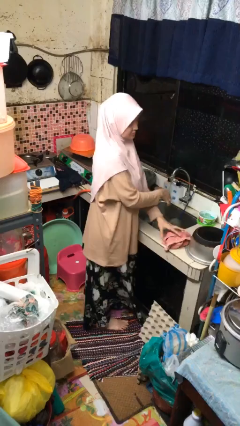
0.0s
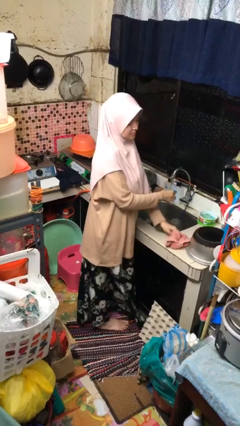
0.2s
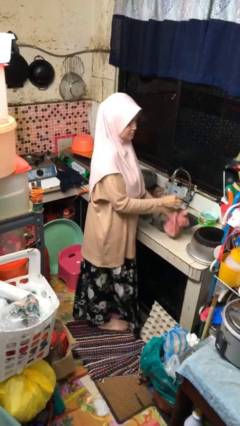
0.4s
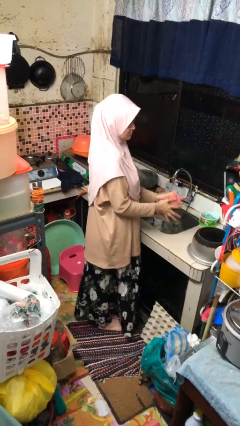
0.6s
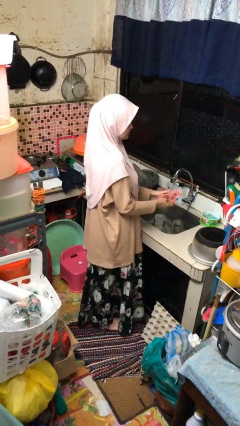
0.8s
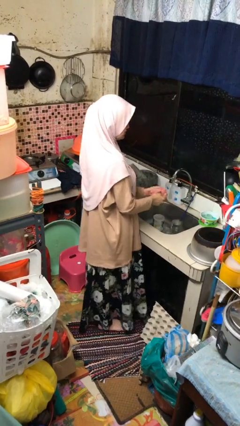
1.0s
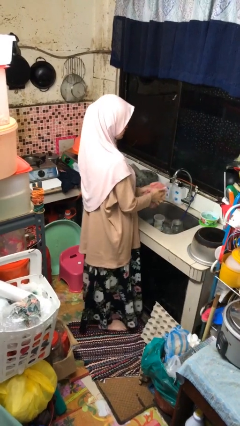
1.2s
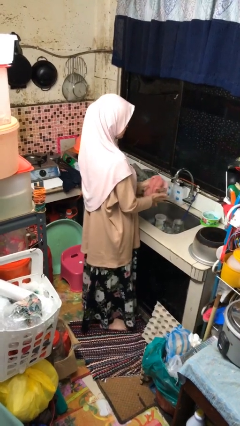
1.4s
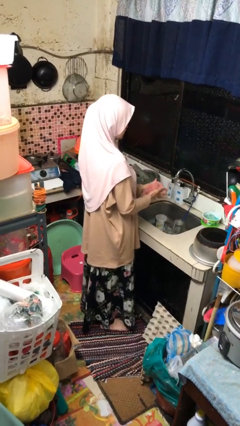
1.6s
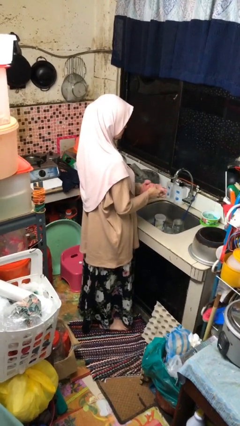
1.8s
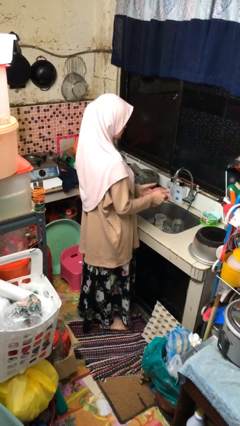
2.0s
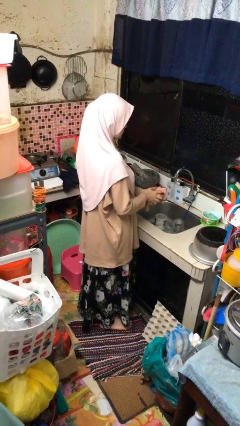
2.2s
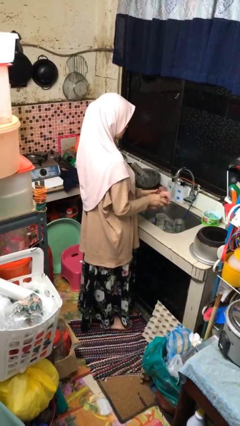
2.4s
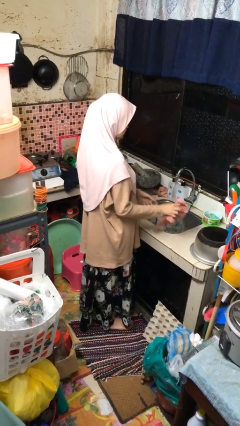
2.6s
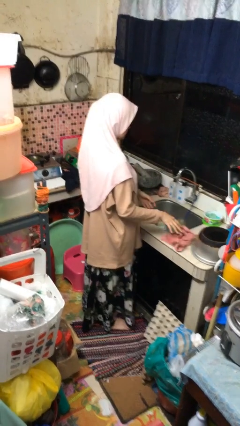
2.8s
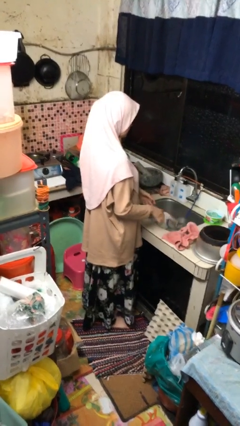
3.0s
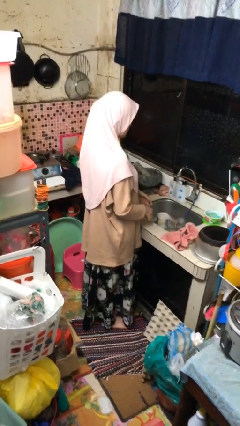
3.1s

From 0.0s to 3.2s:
person dries hands with towel

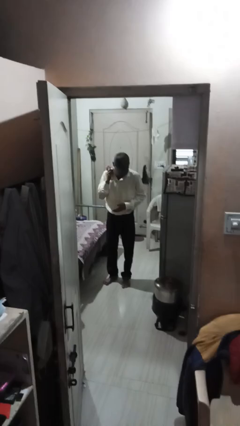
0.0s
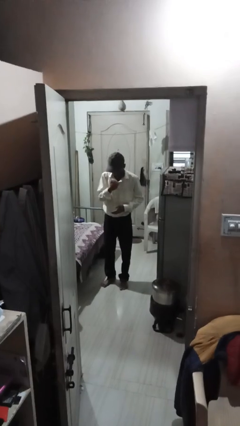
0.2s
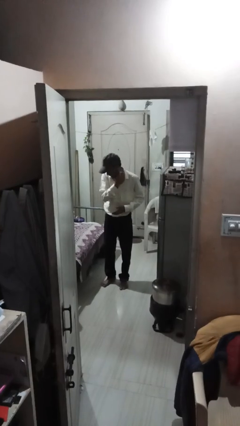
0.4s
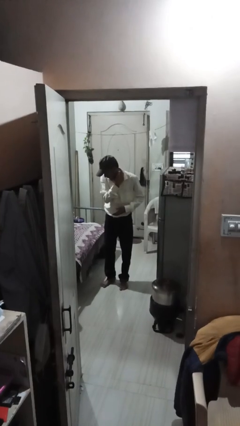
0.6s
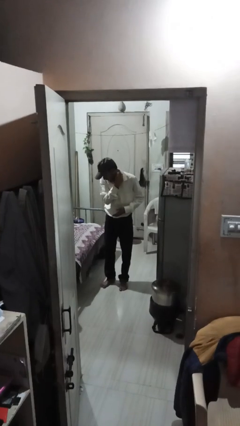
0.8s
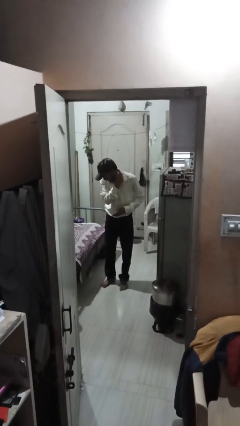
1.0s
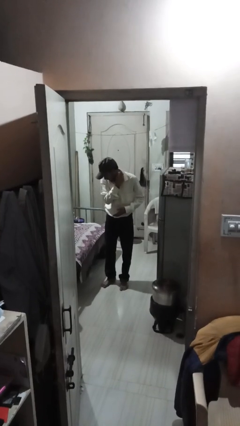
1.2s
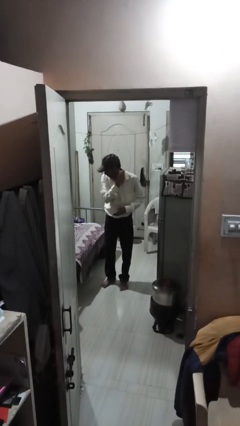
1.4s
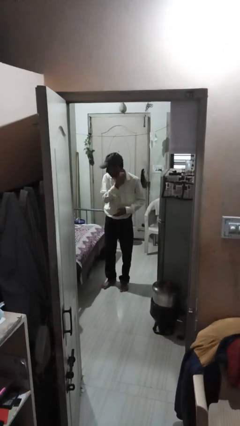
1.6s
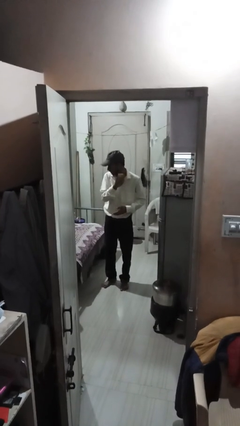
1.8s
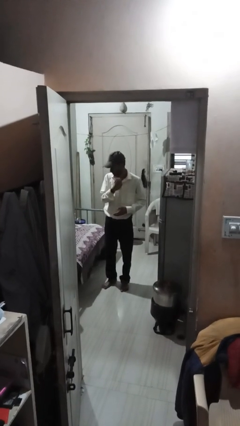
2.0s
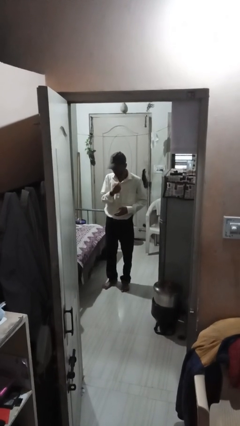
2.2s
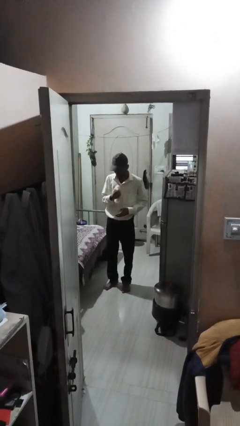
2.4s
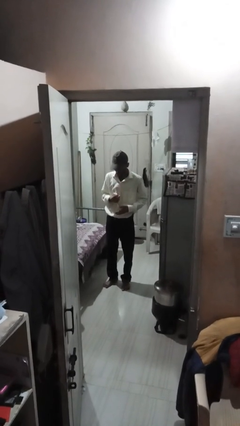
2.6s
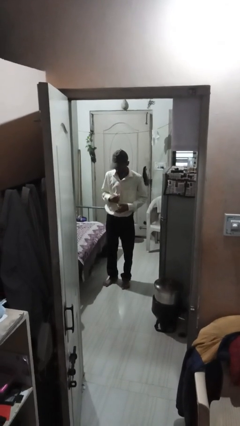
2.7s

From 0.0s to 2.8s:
person applies deodorant

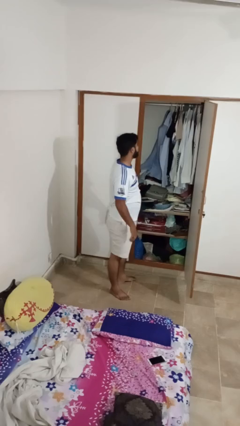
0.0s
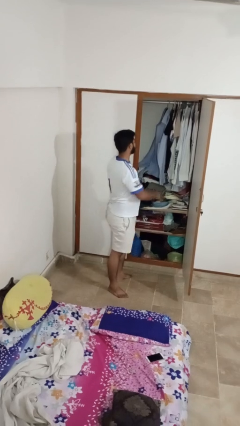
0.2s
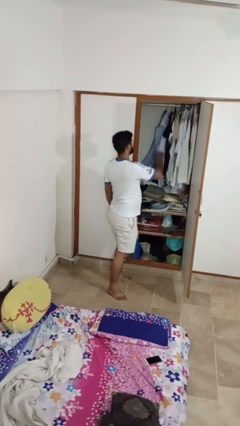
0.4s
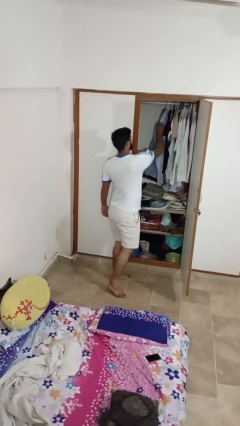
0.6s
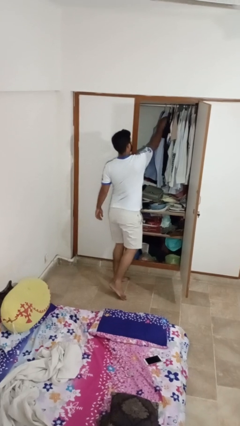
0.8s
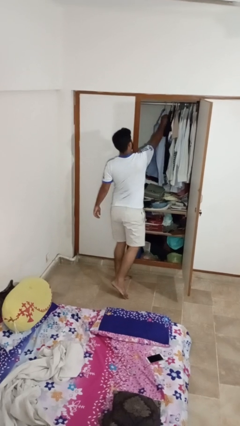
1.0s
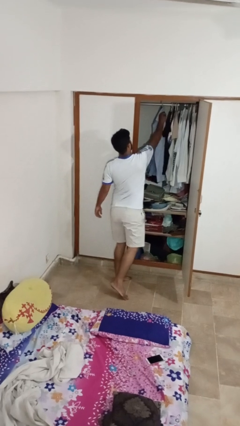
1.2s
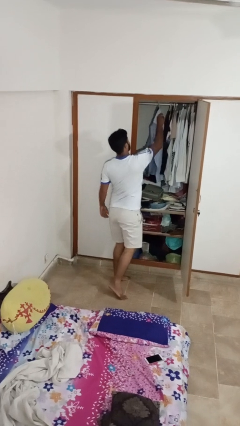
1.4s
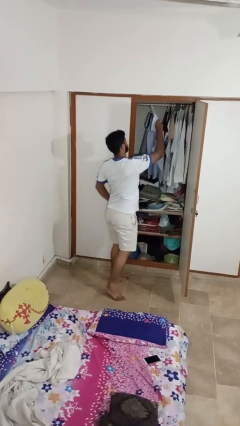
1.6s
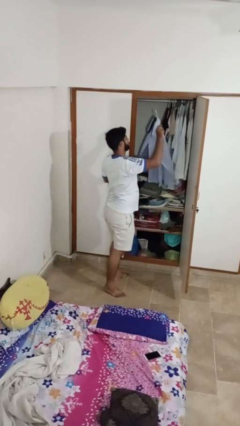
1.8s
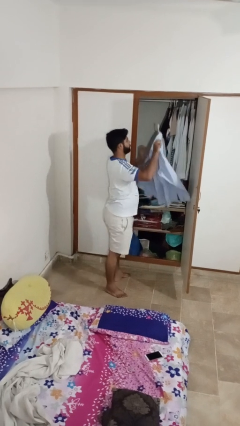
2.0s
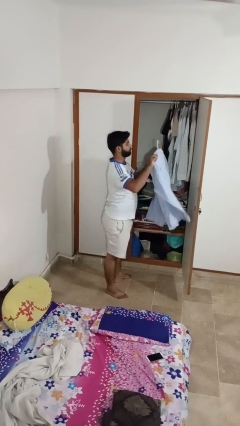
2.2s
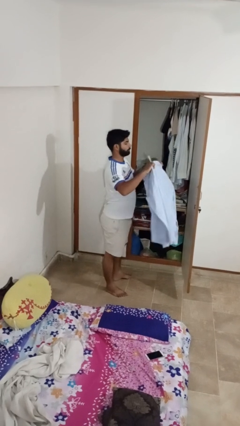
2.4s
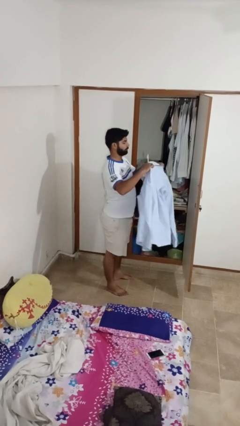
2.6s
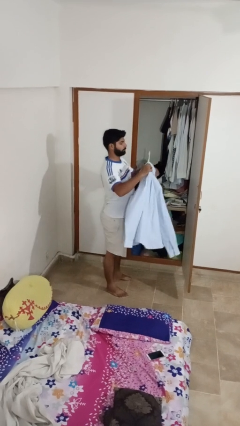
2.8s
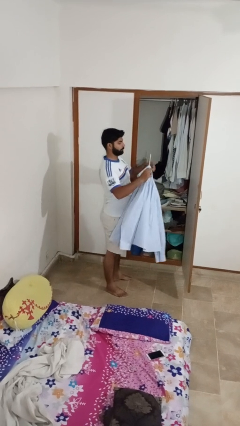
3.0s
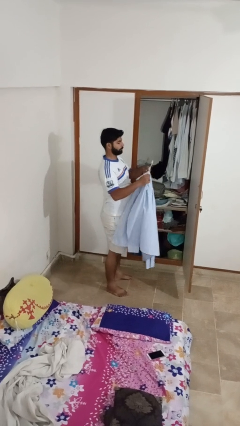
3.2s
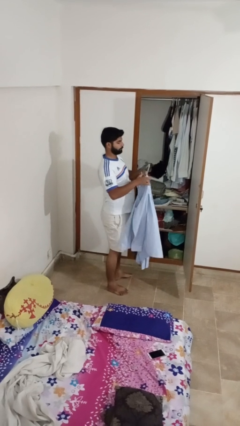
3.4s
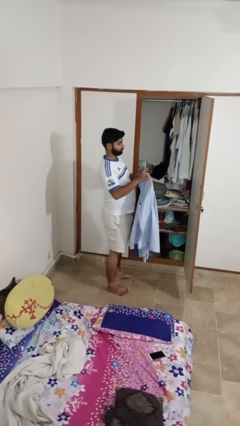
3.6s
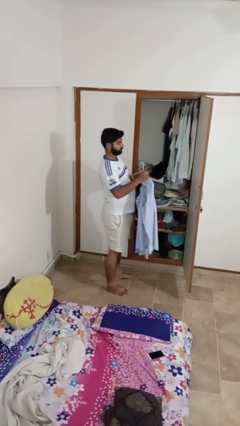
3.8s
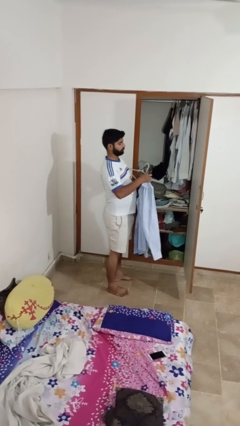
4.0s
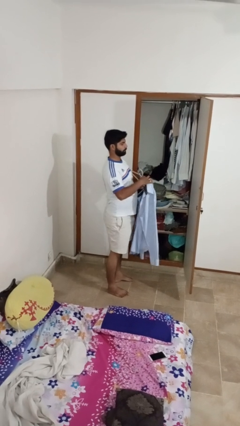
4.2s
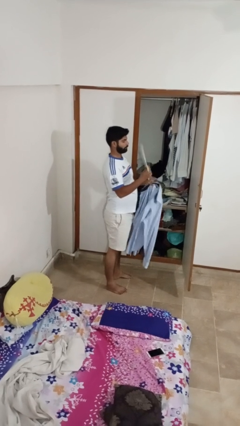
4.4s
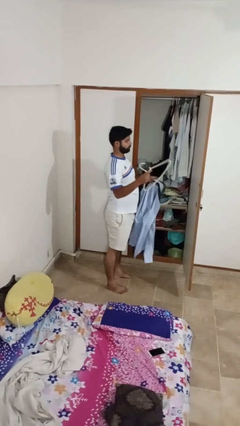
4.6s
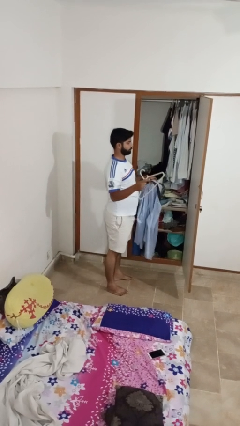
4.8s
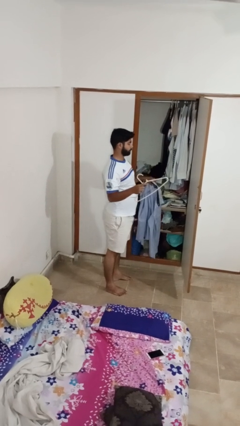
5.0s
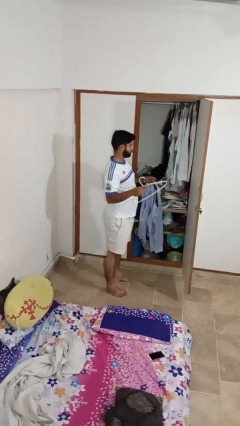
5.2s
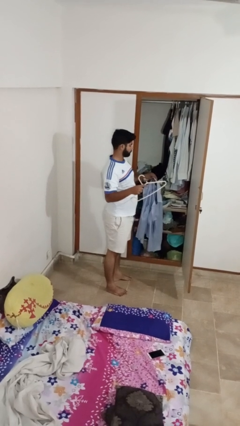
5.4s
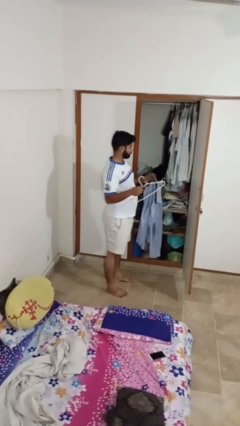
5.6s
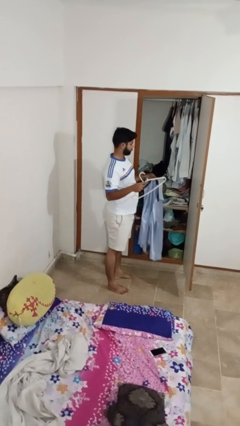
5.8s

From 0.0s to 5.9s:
person takes clothes from closet

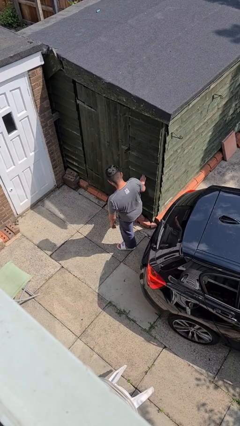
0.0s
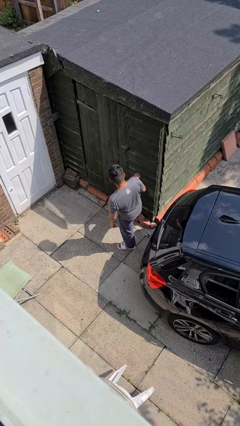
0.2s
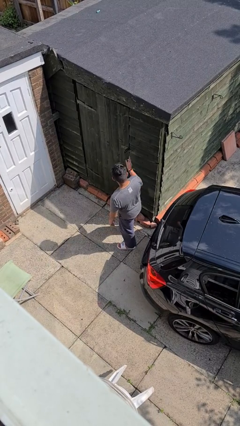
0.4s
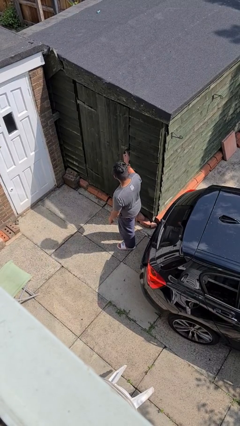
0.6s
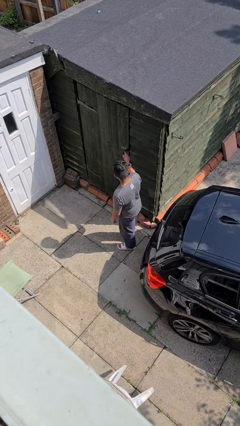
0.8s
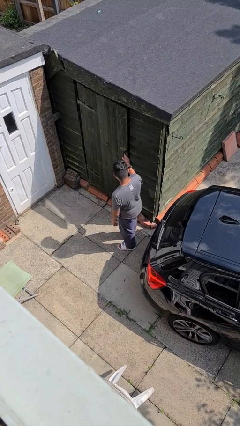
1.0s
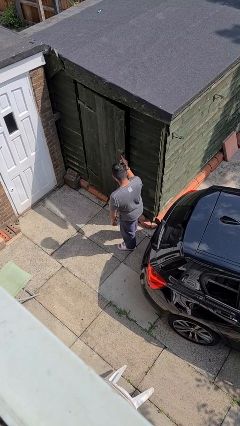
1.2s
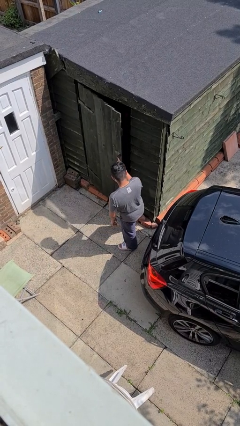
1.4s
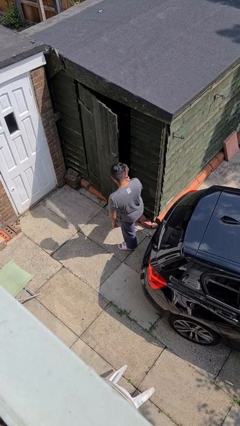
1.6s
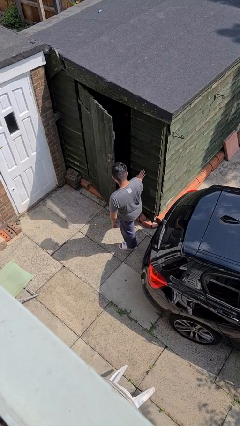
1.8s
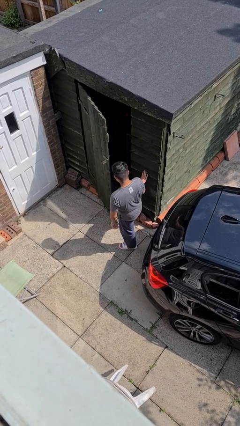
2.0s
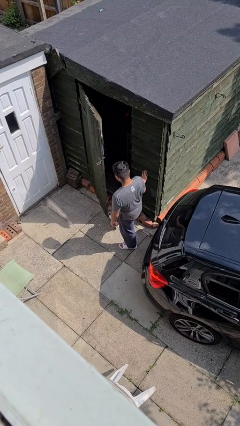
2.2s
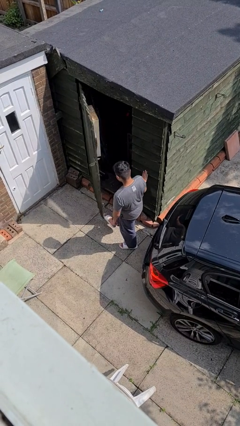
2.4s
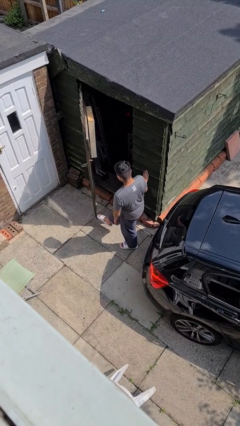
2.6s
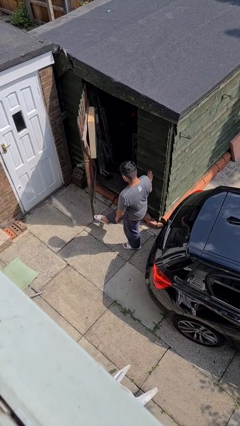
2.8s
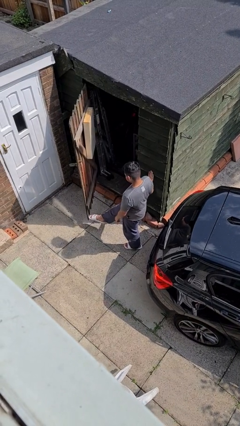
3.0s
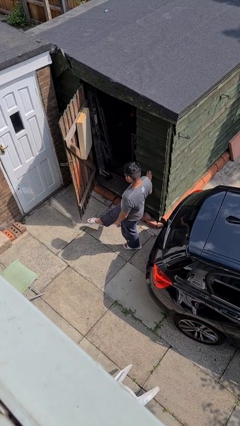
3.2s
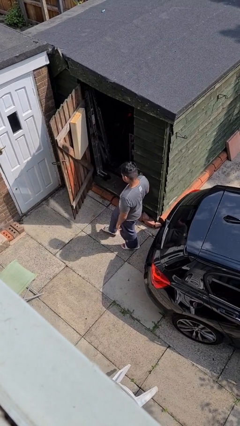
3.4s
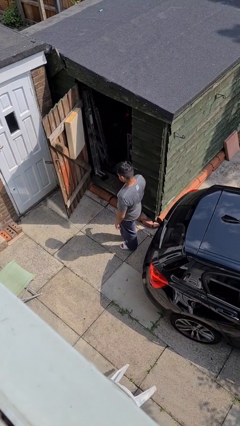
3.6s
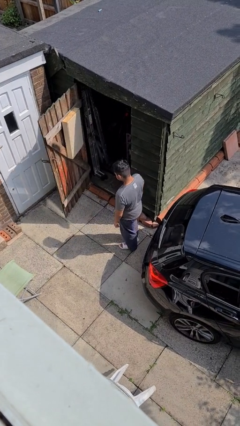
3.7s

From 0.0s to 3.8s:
person opens facility door

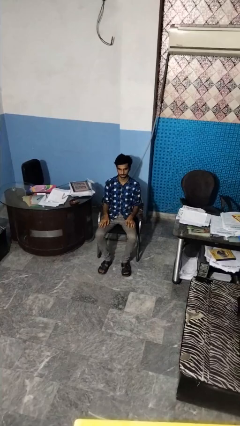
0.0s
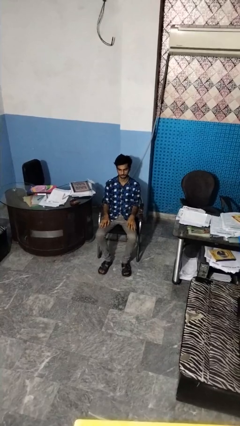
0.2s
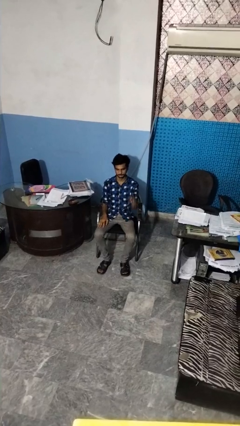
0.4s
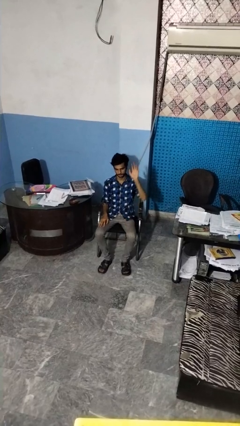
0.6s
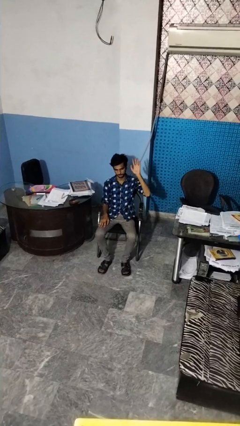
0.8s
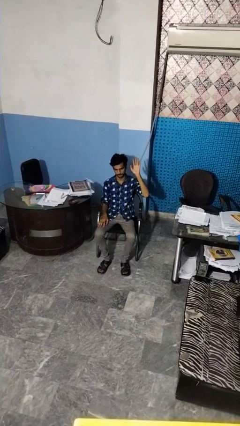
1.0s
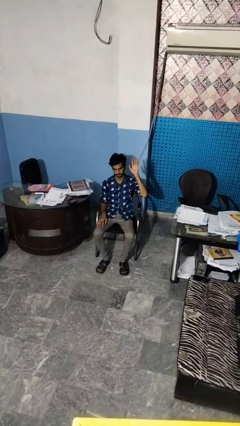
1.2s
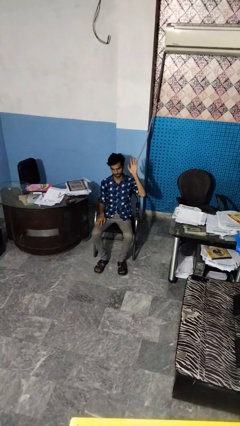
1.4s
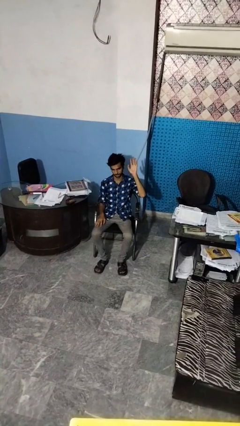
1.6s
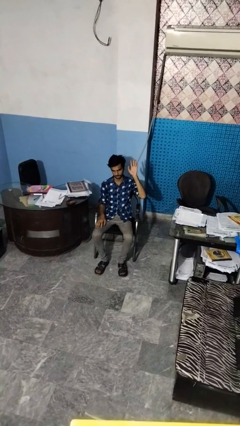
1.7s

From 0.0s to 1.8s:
person gestures raise hand

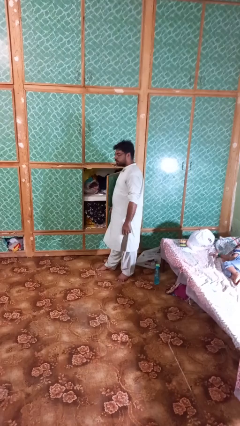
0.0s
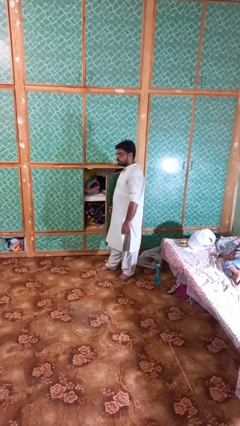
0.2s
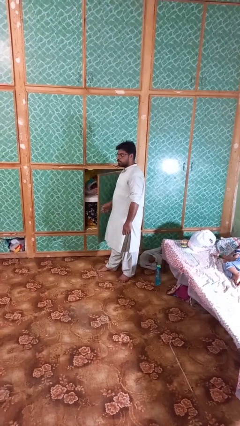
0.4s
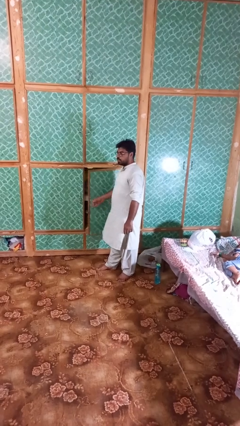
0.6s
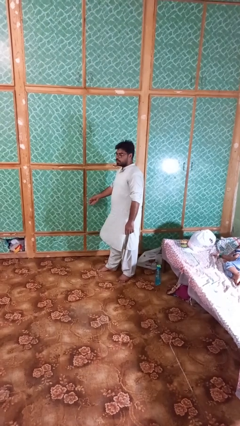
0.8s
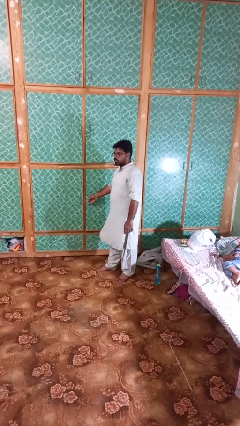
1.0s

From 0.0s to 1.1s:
person closes closet door
